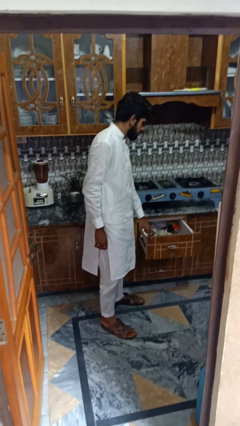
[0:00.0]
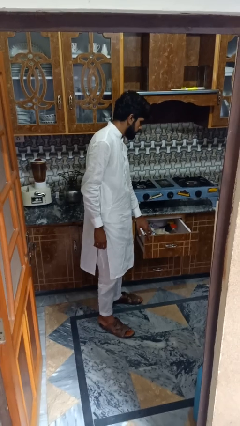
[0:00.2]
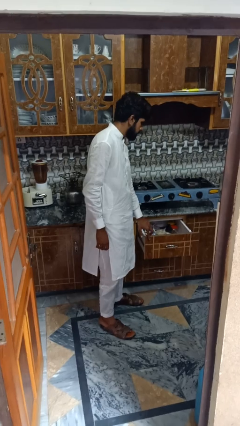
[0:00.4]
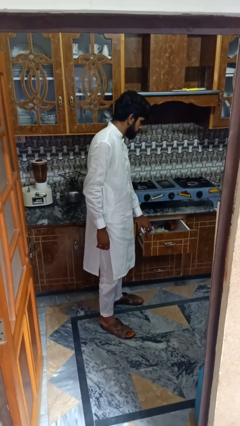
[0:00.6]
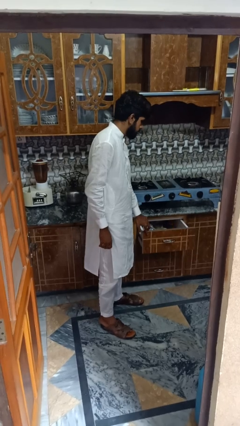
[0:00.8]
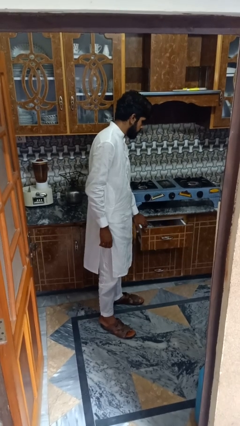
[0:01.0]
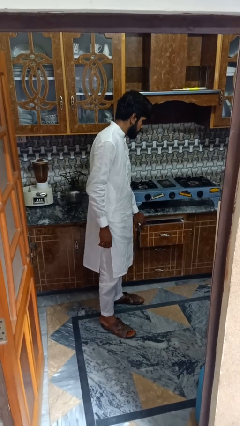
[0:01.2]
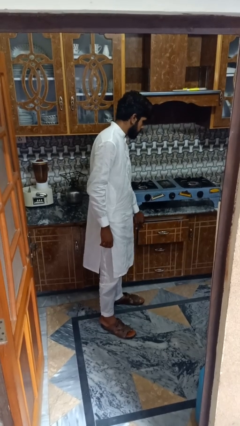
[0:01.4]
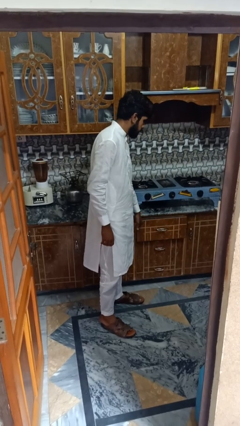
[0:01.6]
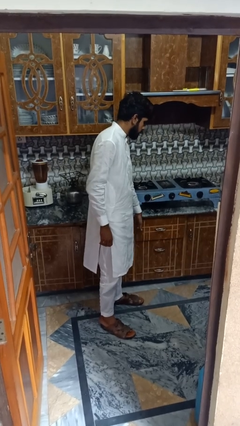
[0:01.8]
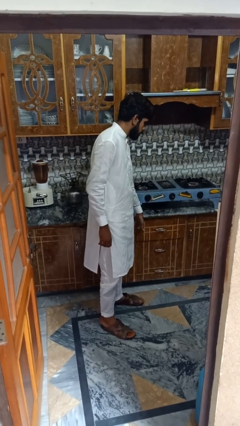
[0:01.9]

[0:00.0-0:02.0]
person closes kitchen drawer

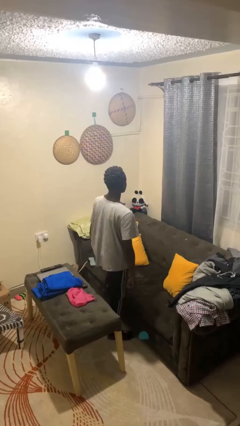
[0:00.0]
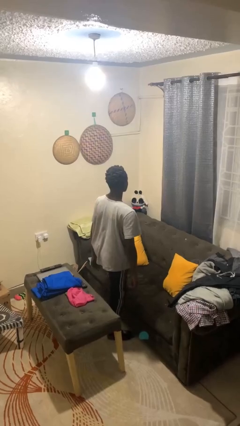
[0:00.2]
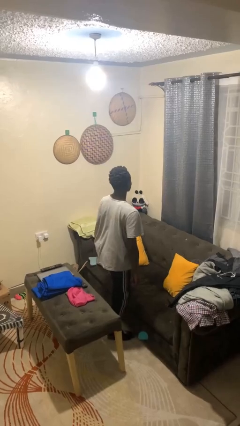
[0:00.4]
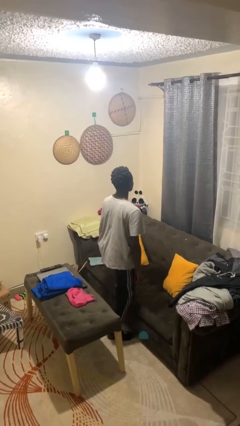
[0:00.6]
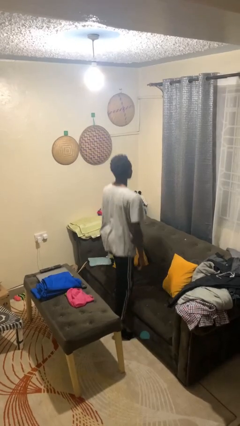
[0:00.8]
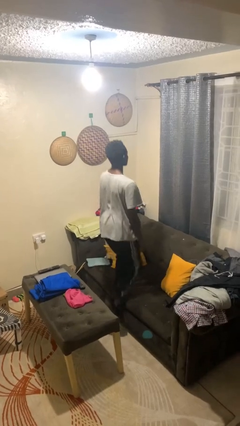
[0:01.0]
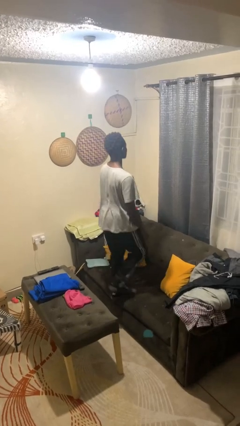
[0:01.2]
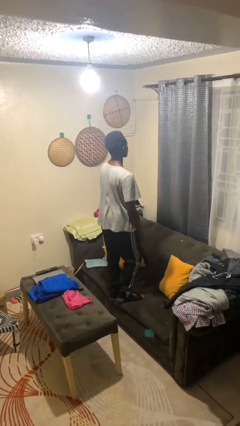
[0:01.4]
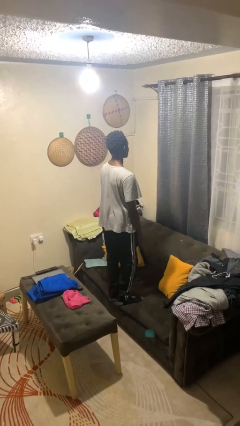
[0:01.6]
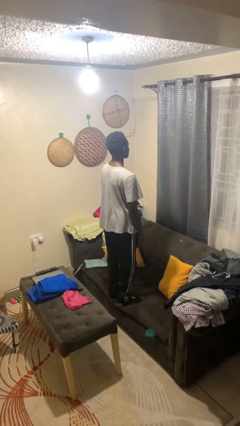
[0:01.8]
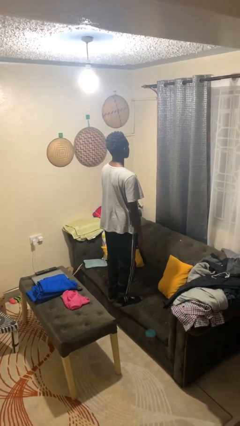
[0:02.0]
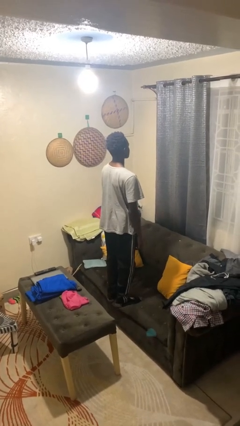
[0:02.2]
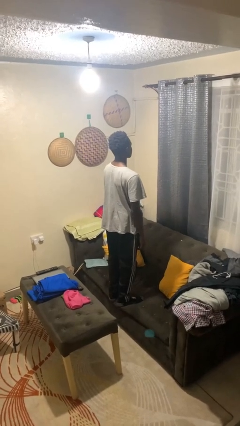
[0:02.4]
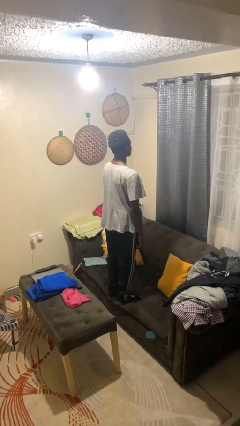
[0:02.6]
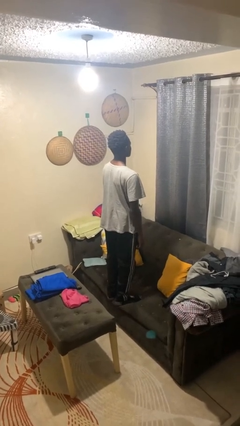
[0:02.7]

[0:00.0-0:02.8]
person jumps on couch

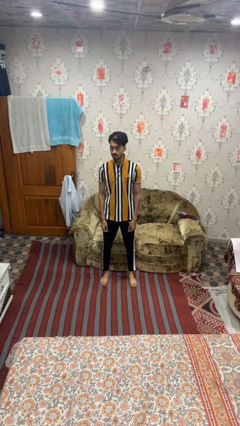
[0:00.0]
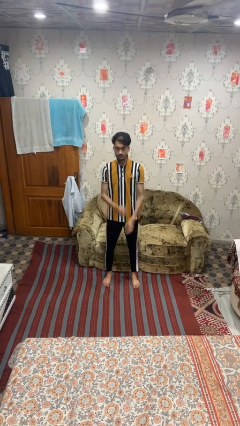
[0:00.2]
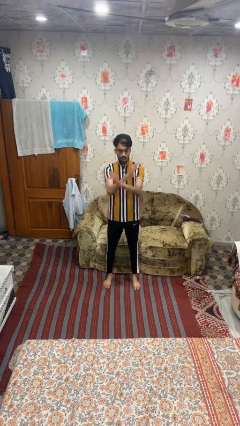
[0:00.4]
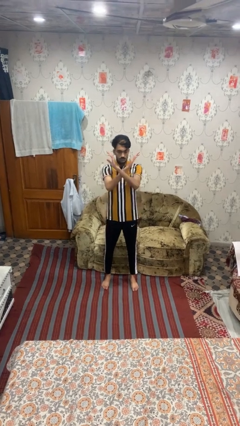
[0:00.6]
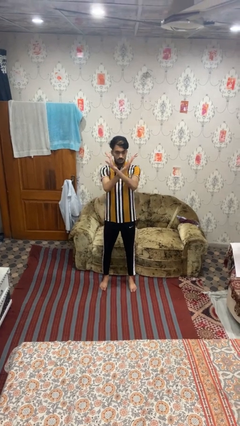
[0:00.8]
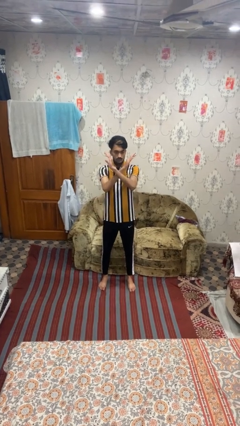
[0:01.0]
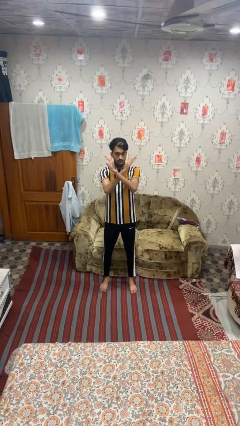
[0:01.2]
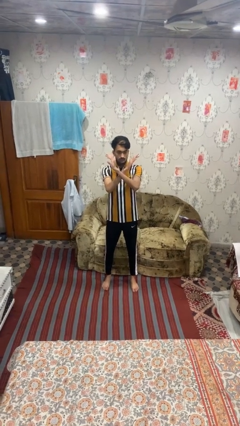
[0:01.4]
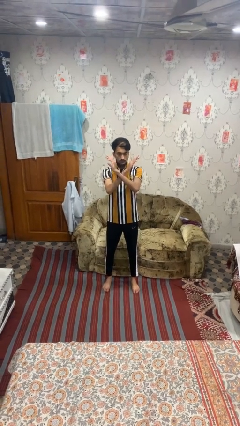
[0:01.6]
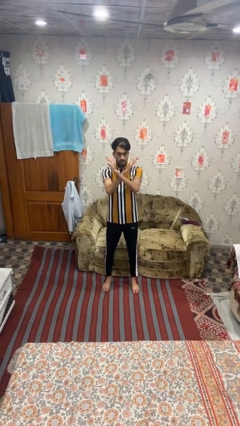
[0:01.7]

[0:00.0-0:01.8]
person gestures arms x

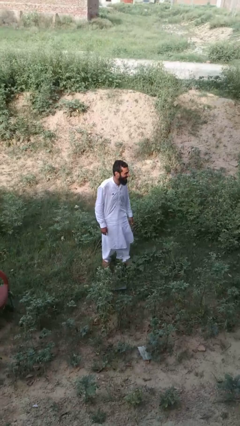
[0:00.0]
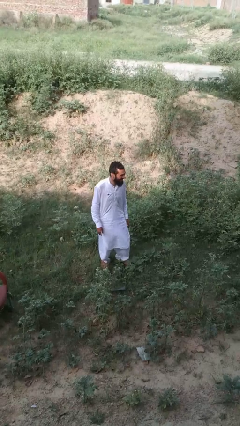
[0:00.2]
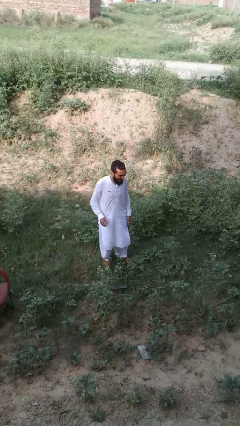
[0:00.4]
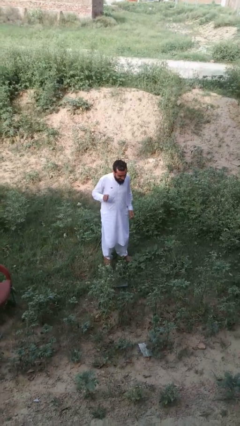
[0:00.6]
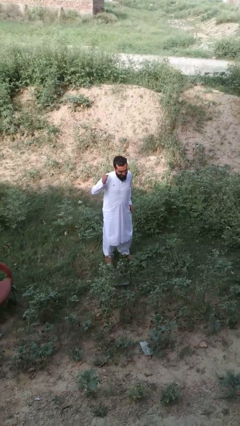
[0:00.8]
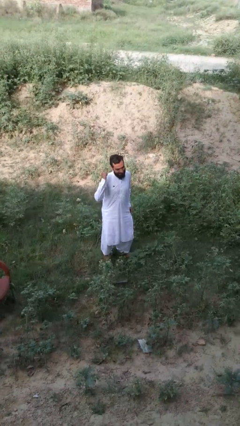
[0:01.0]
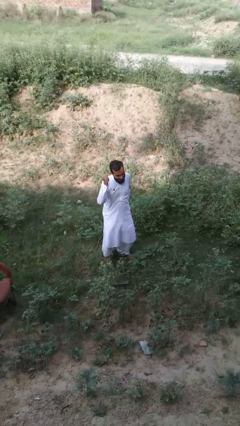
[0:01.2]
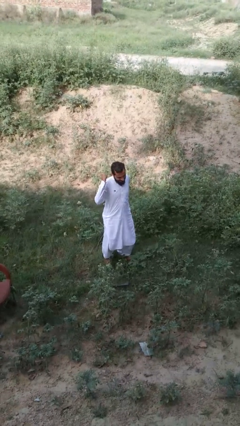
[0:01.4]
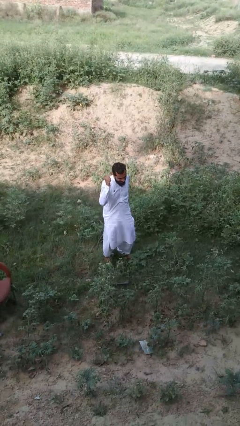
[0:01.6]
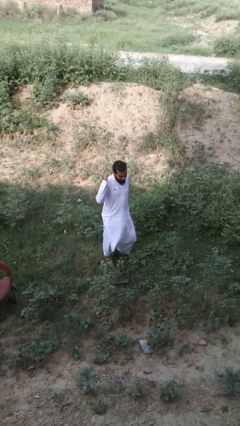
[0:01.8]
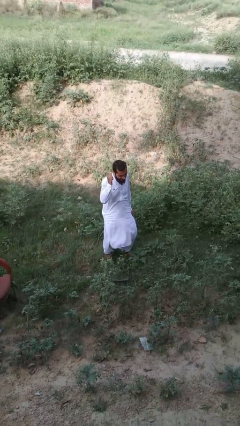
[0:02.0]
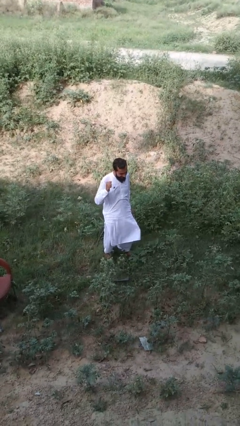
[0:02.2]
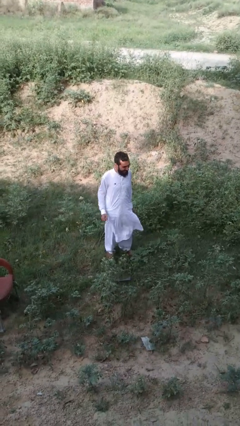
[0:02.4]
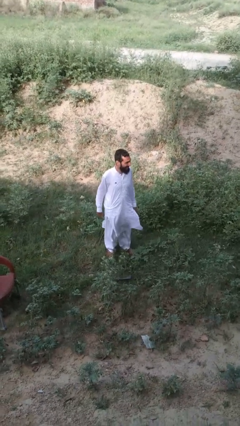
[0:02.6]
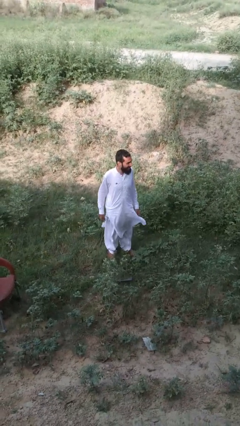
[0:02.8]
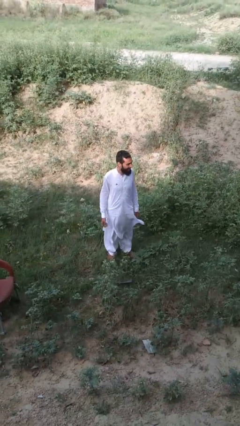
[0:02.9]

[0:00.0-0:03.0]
person dances in place

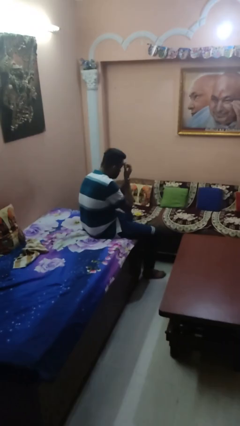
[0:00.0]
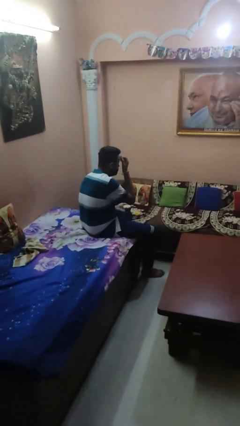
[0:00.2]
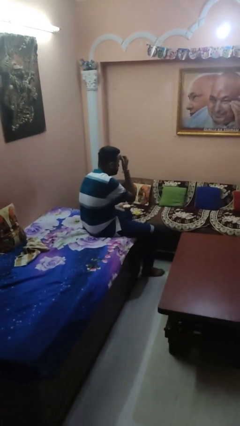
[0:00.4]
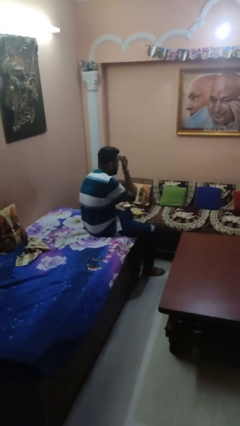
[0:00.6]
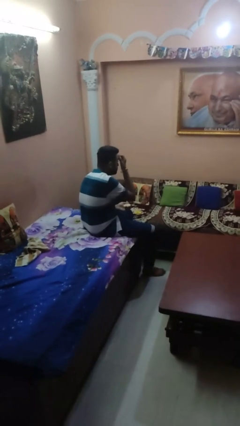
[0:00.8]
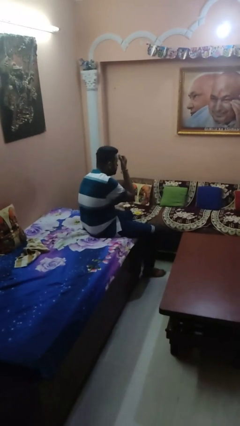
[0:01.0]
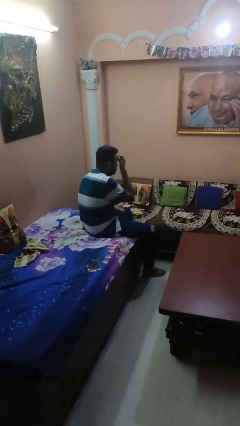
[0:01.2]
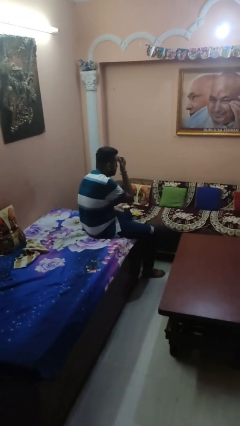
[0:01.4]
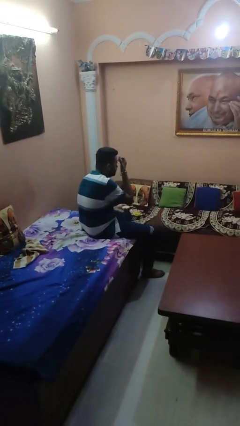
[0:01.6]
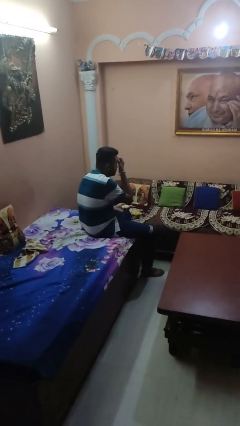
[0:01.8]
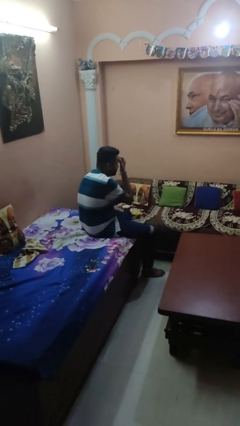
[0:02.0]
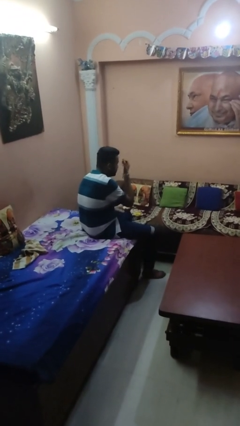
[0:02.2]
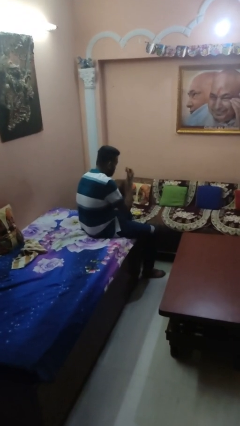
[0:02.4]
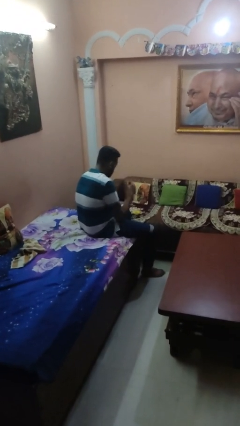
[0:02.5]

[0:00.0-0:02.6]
person applies foundation makeup

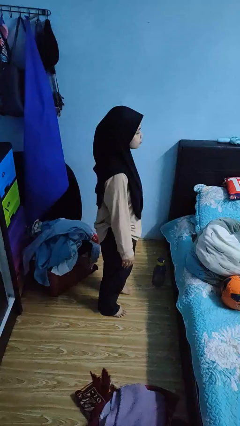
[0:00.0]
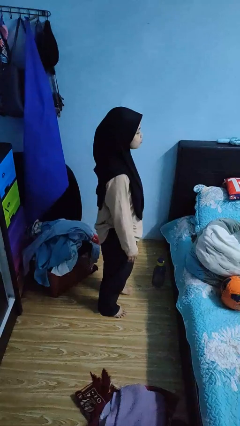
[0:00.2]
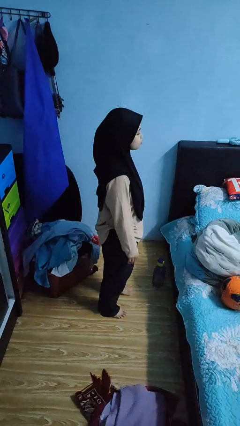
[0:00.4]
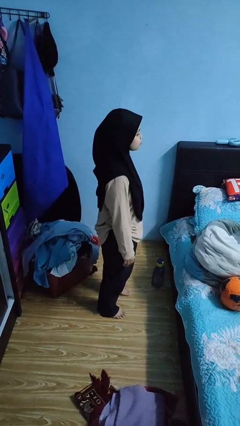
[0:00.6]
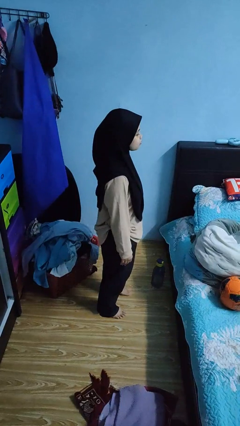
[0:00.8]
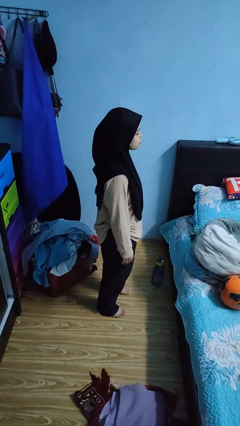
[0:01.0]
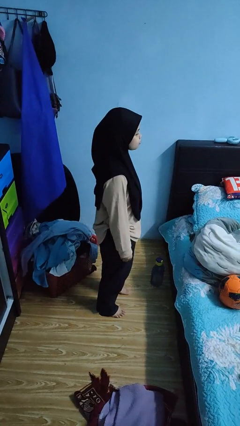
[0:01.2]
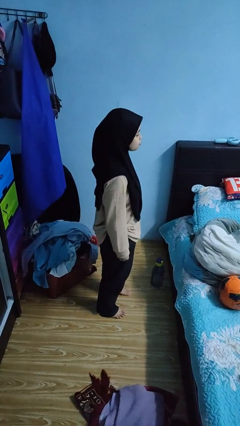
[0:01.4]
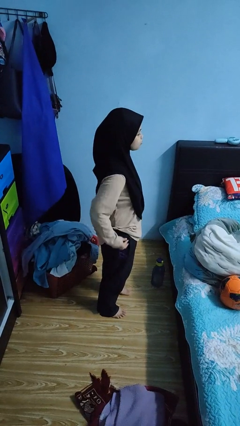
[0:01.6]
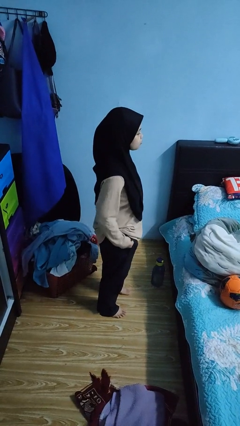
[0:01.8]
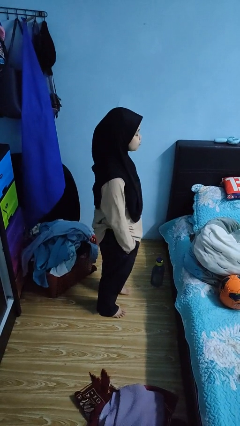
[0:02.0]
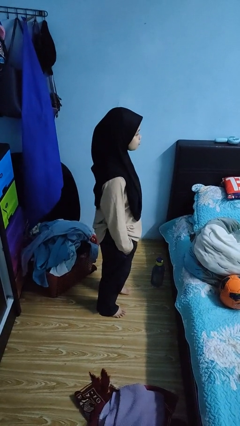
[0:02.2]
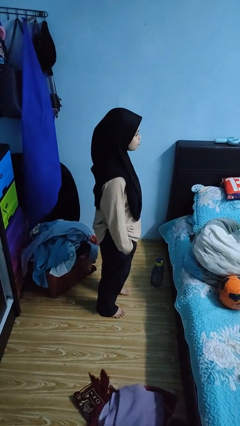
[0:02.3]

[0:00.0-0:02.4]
person puts hands in back pockets

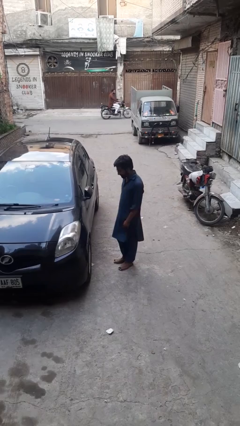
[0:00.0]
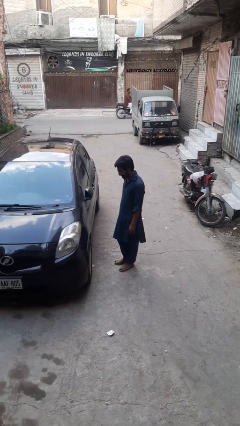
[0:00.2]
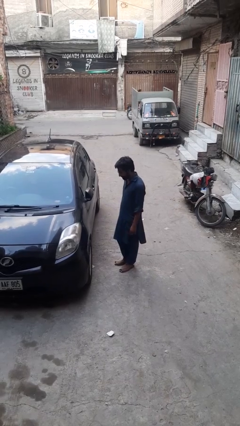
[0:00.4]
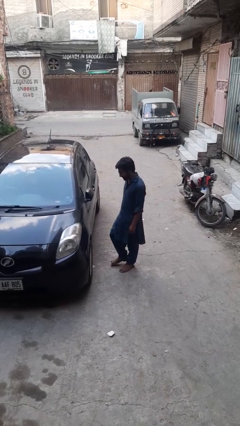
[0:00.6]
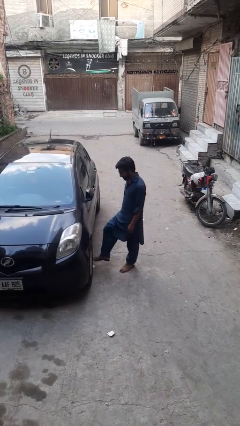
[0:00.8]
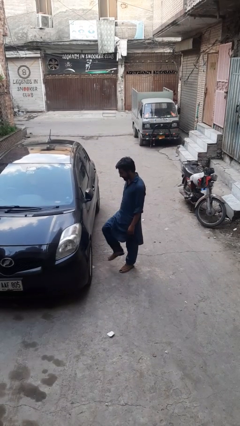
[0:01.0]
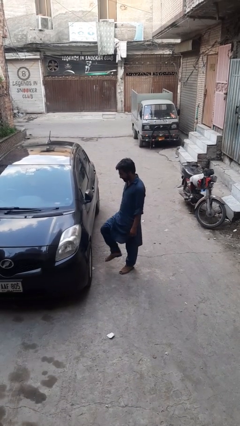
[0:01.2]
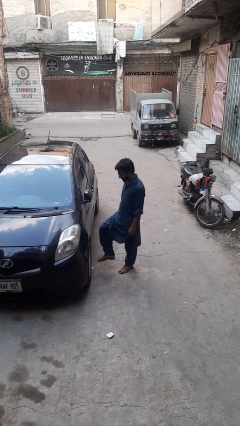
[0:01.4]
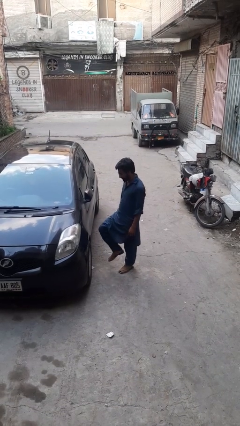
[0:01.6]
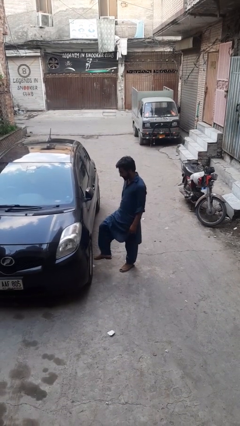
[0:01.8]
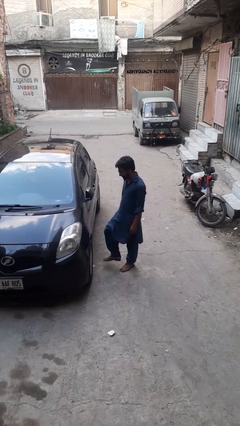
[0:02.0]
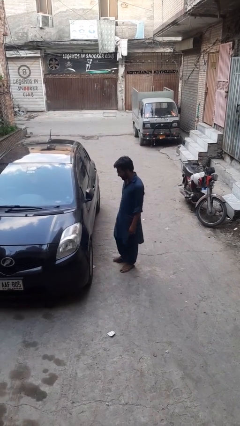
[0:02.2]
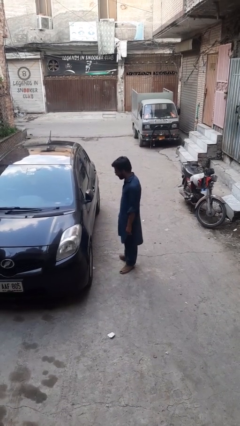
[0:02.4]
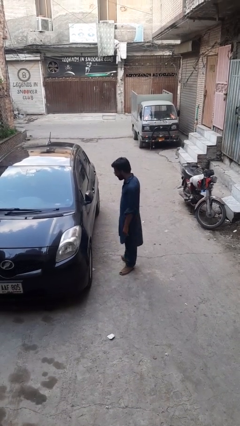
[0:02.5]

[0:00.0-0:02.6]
person kicks car tires
